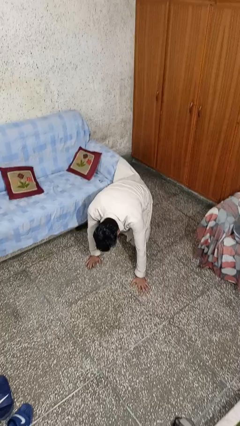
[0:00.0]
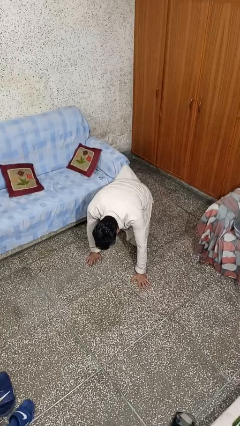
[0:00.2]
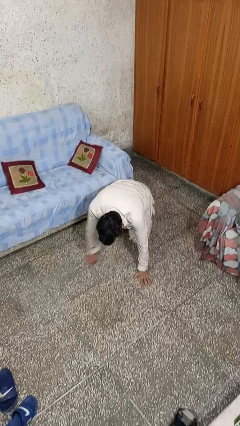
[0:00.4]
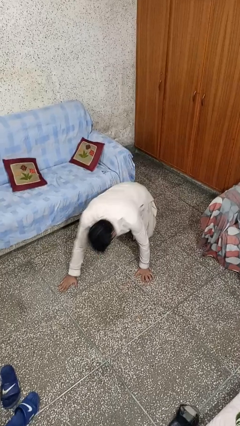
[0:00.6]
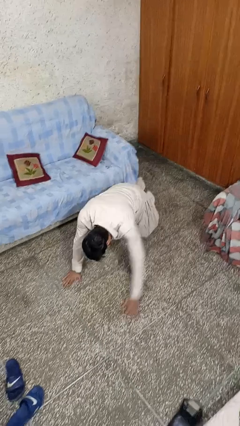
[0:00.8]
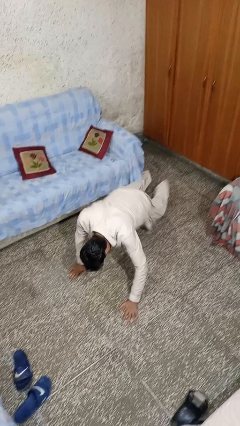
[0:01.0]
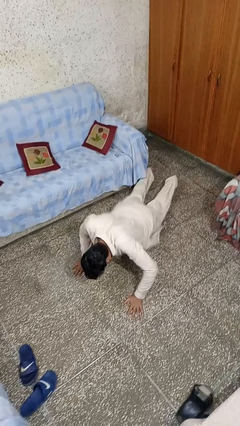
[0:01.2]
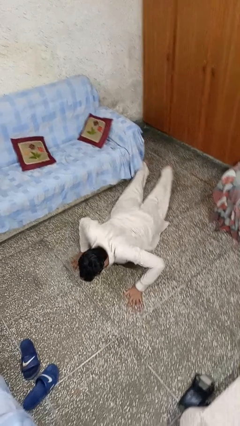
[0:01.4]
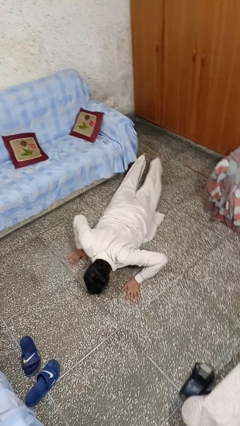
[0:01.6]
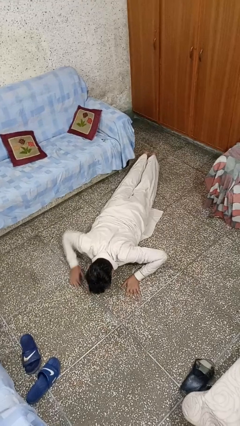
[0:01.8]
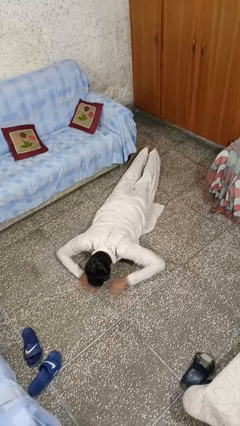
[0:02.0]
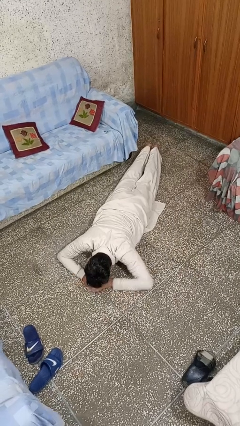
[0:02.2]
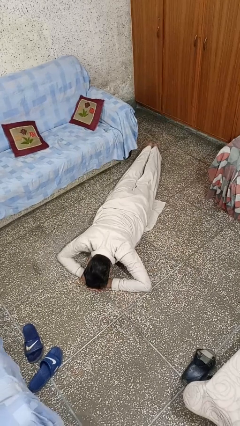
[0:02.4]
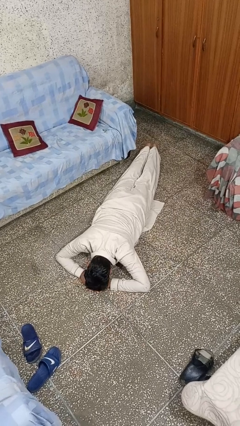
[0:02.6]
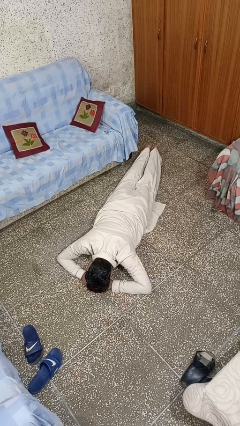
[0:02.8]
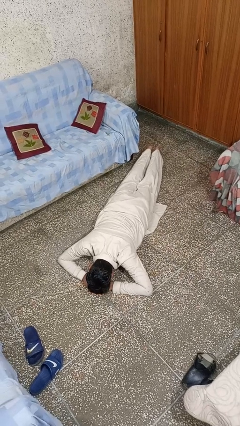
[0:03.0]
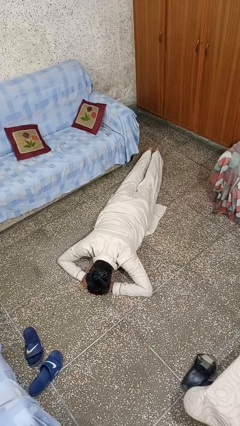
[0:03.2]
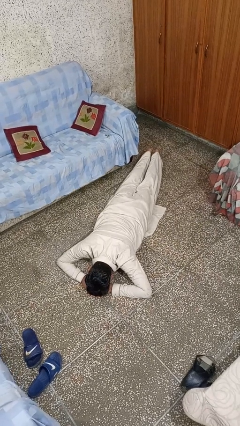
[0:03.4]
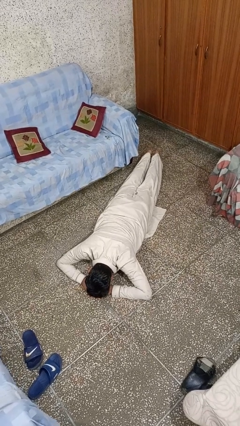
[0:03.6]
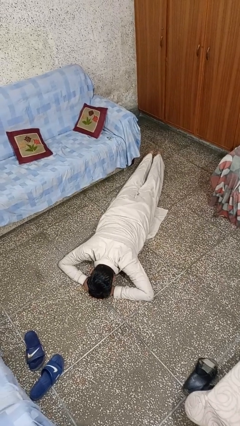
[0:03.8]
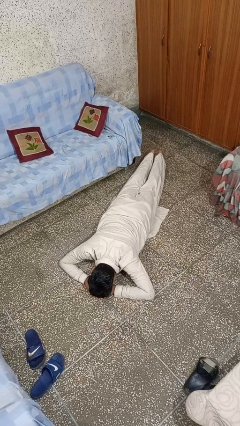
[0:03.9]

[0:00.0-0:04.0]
person lies down on floor

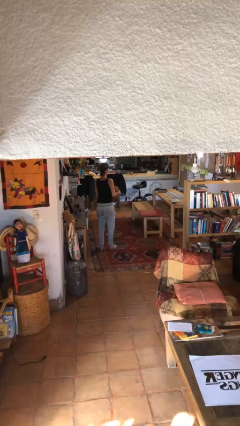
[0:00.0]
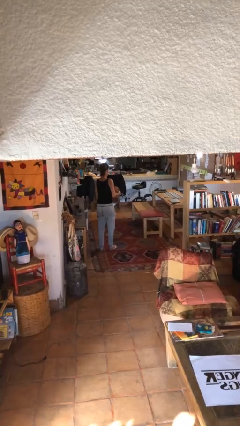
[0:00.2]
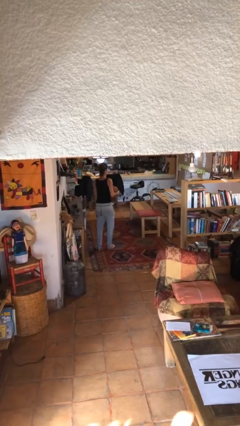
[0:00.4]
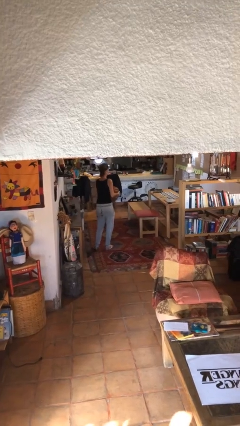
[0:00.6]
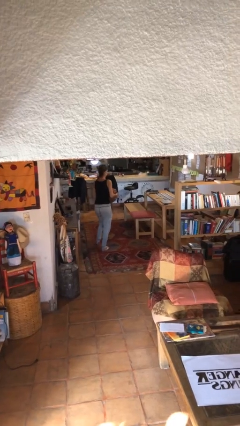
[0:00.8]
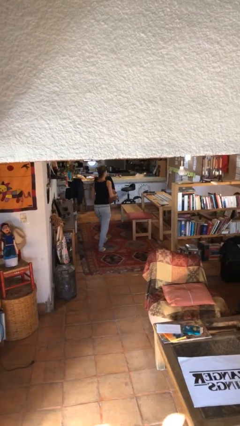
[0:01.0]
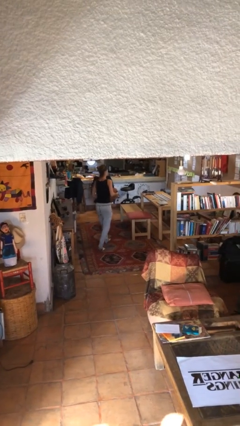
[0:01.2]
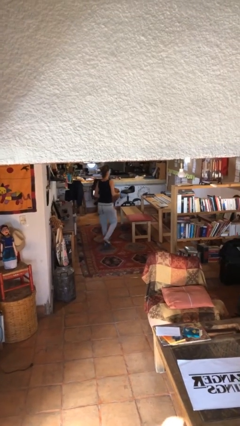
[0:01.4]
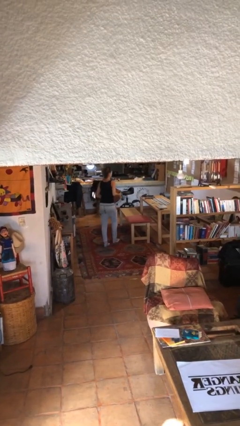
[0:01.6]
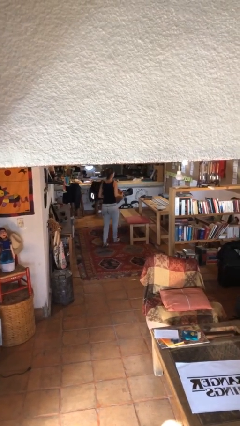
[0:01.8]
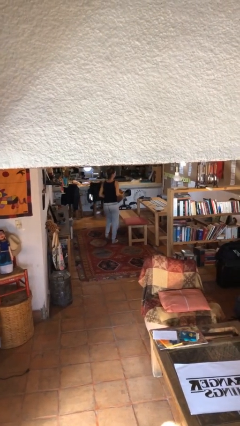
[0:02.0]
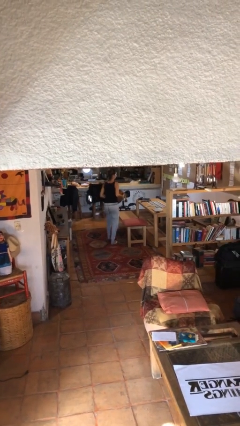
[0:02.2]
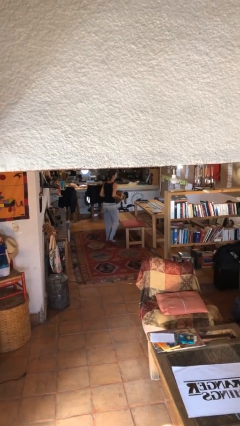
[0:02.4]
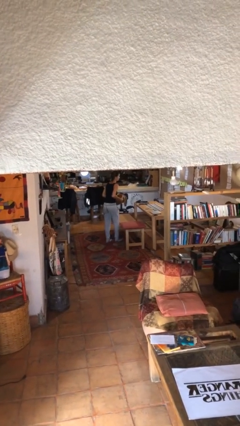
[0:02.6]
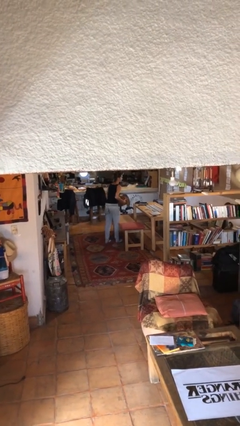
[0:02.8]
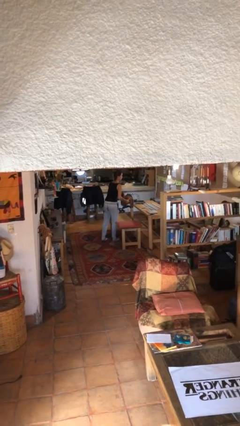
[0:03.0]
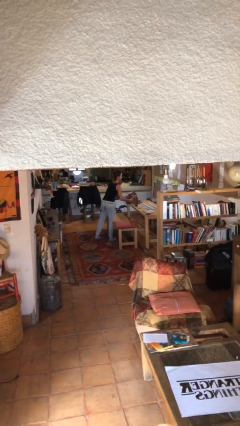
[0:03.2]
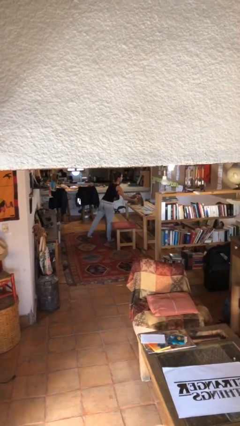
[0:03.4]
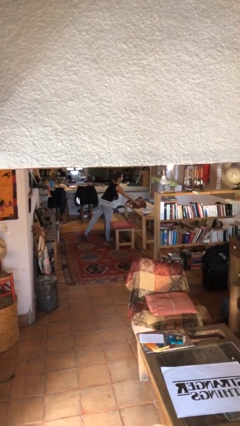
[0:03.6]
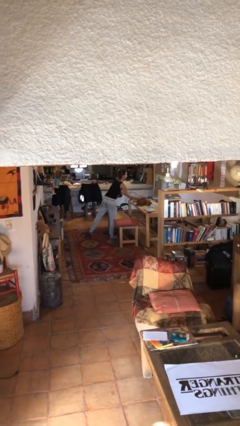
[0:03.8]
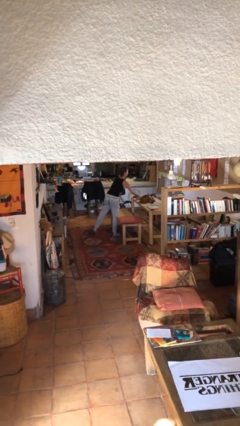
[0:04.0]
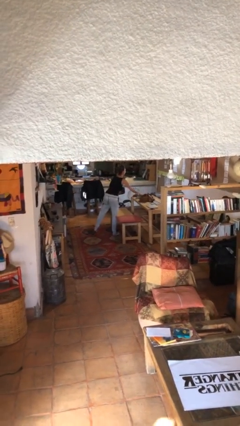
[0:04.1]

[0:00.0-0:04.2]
person puts down object on table

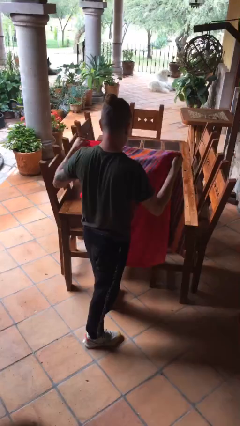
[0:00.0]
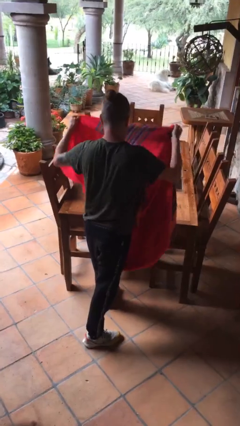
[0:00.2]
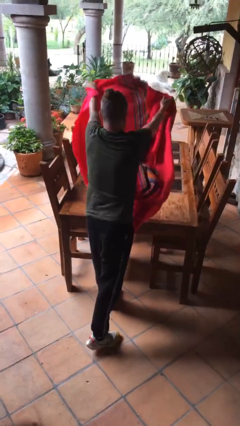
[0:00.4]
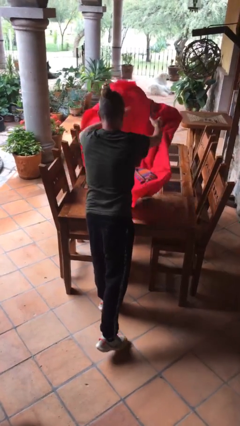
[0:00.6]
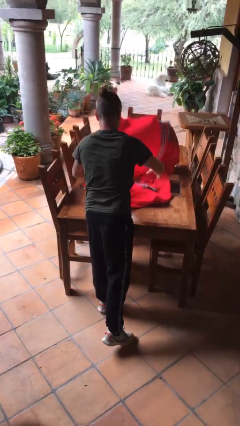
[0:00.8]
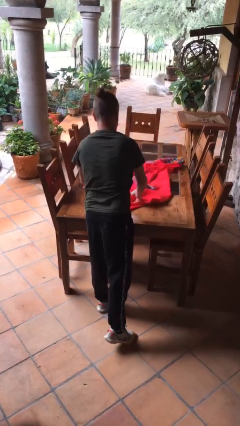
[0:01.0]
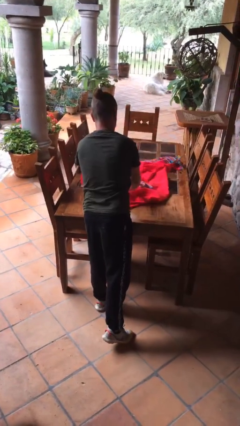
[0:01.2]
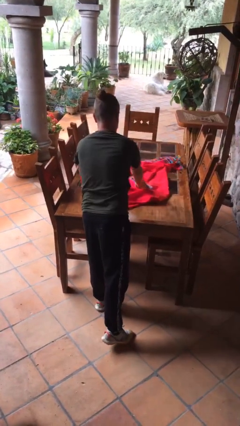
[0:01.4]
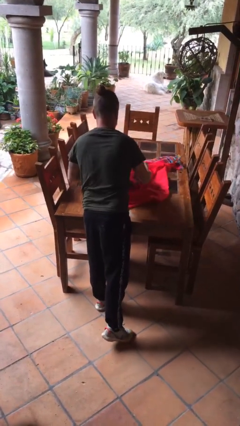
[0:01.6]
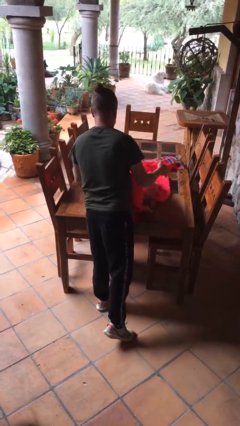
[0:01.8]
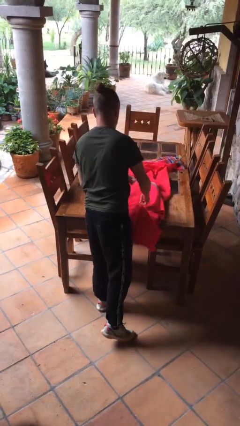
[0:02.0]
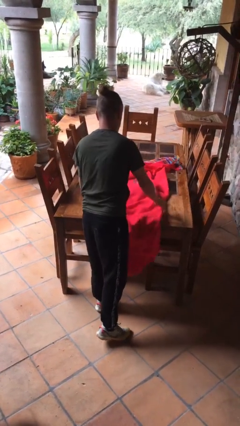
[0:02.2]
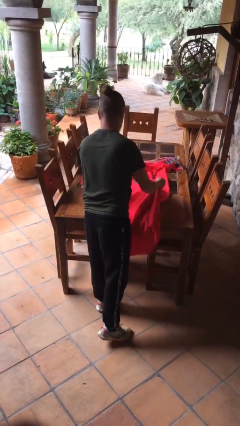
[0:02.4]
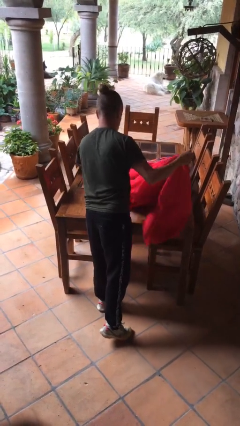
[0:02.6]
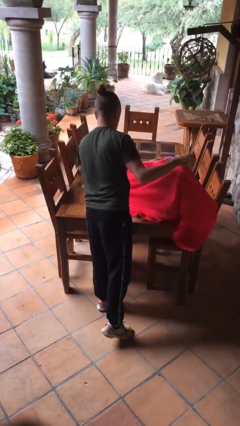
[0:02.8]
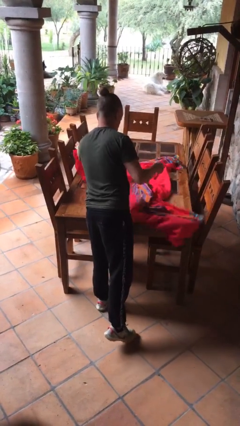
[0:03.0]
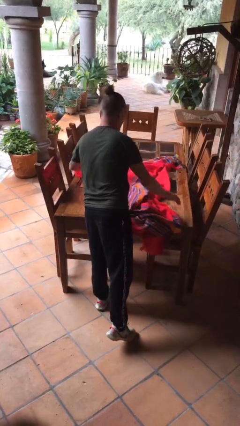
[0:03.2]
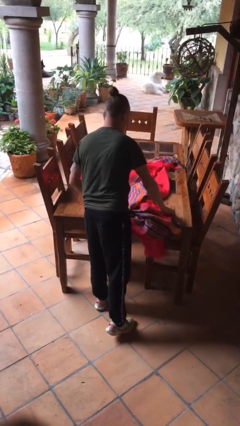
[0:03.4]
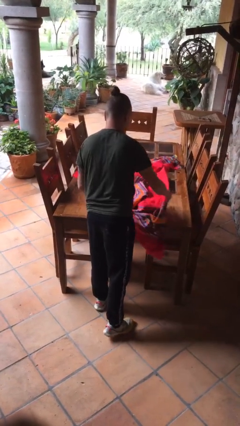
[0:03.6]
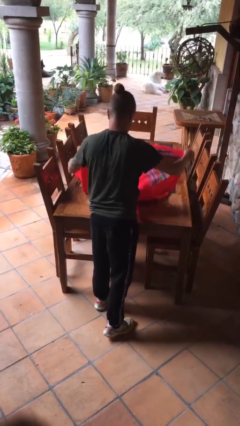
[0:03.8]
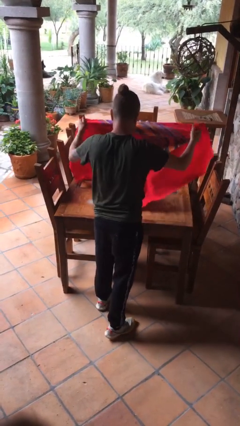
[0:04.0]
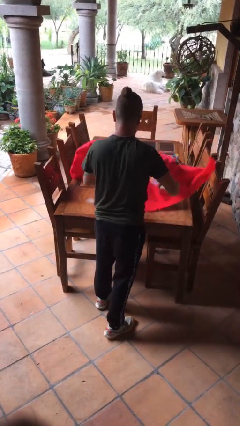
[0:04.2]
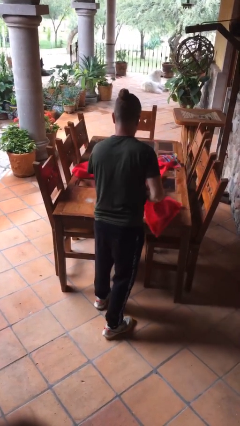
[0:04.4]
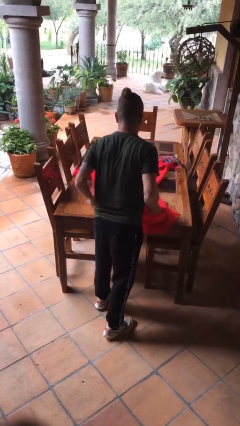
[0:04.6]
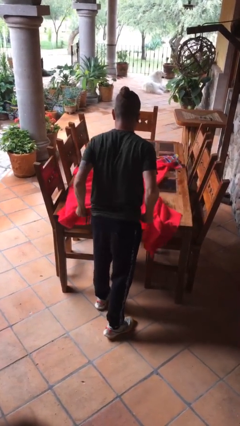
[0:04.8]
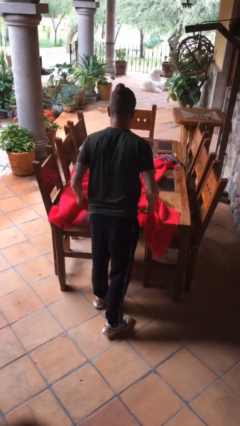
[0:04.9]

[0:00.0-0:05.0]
person spreads tablecloth

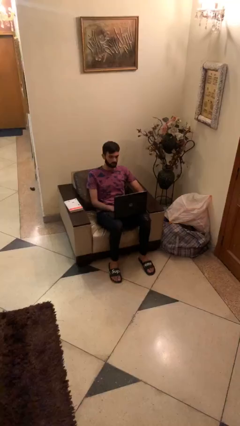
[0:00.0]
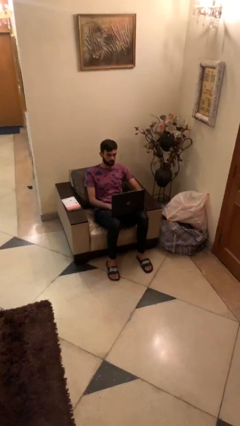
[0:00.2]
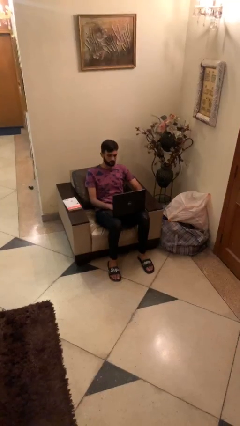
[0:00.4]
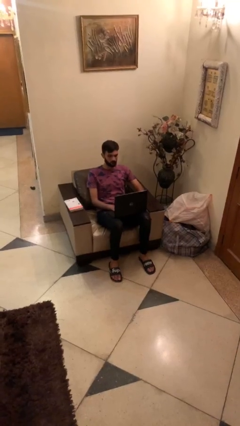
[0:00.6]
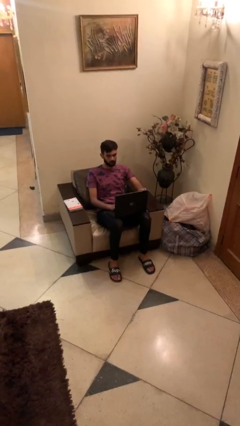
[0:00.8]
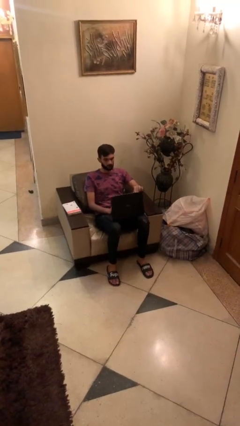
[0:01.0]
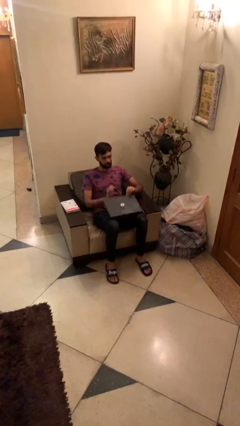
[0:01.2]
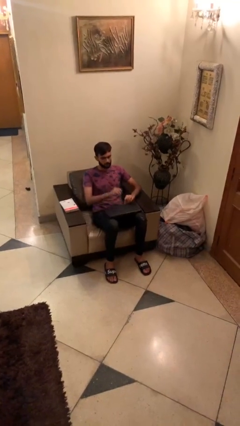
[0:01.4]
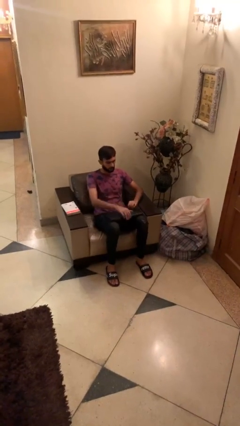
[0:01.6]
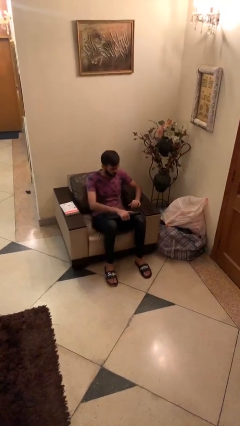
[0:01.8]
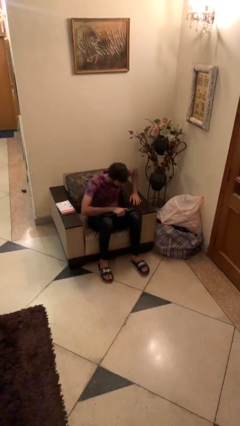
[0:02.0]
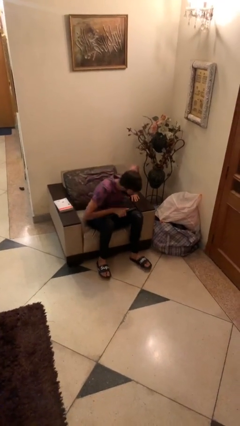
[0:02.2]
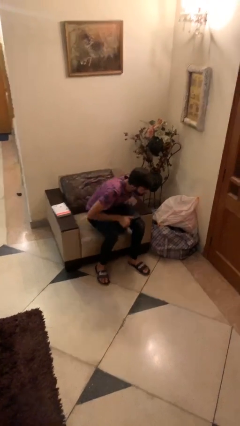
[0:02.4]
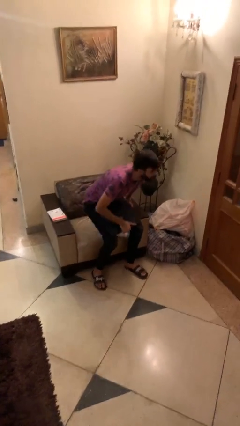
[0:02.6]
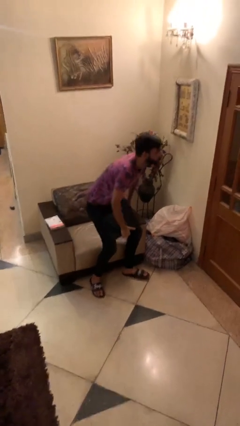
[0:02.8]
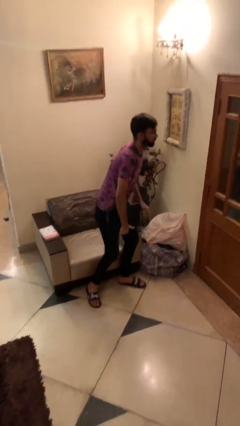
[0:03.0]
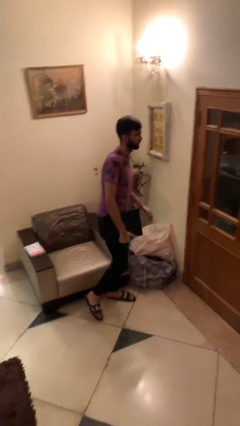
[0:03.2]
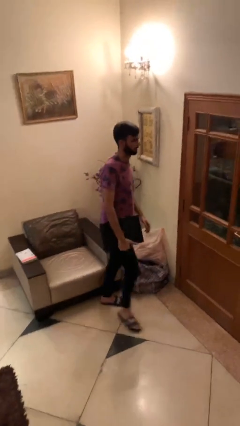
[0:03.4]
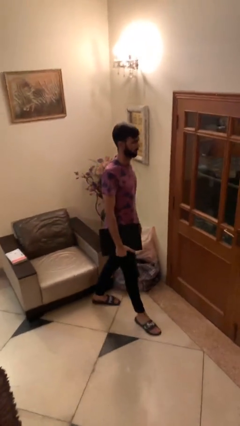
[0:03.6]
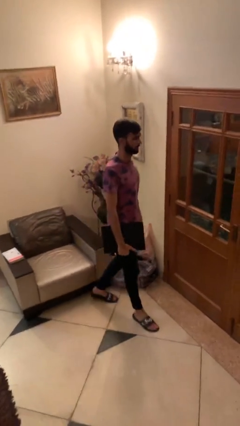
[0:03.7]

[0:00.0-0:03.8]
person stands up

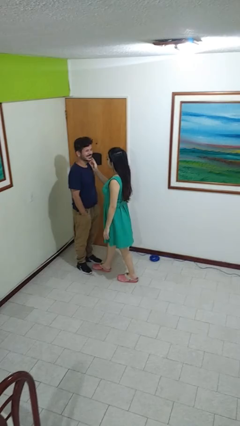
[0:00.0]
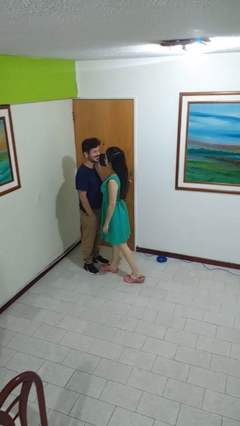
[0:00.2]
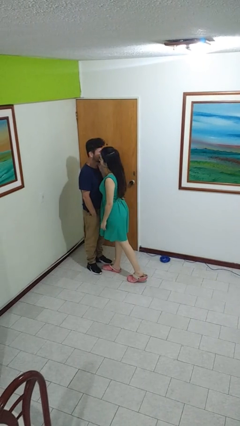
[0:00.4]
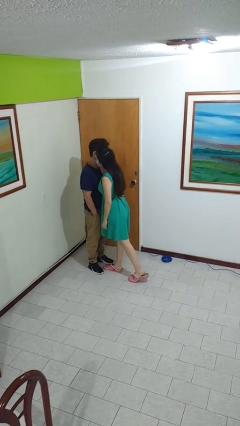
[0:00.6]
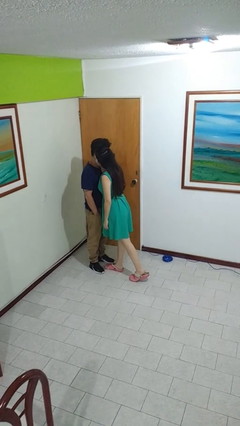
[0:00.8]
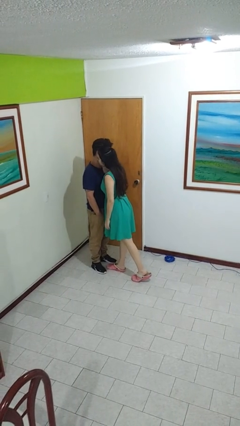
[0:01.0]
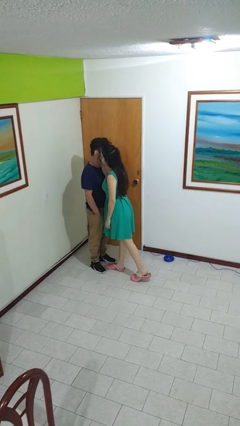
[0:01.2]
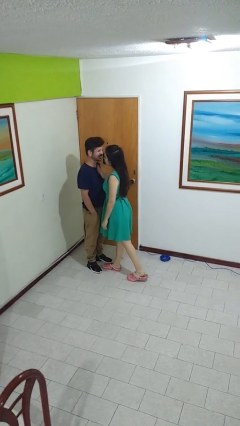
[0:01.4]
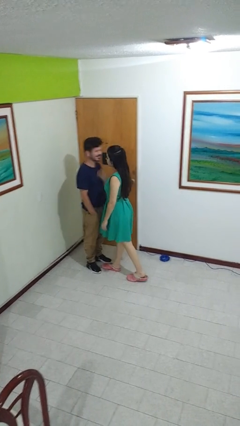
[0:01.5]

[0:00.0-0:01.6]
person kisses cheek of person
